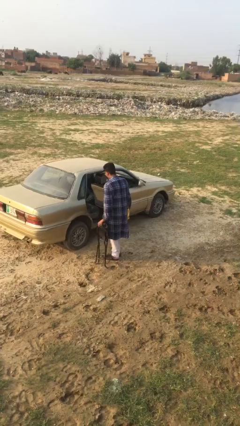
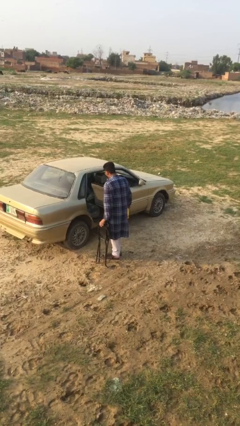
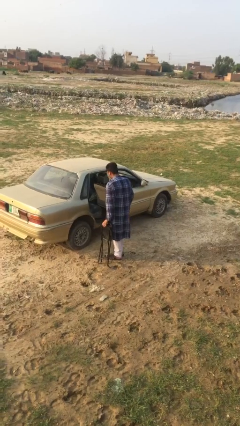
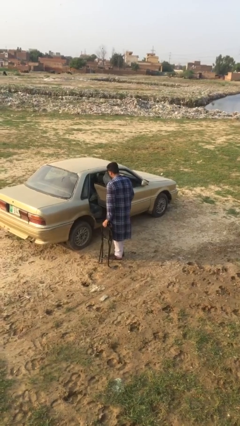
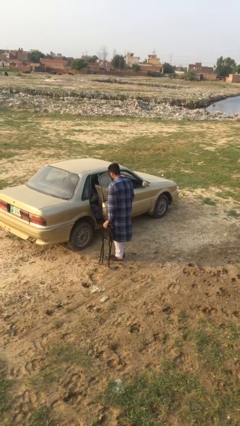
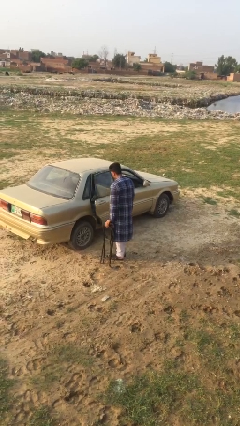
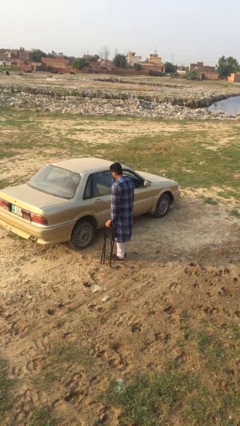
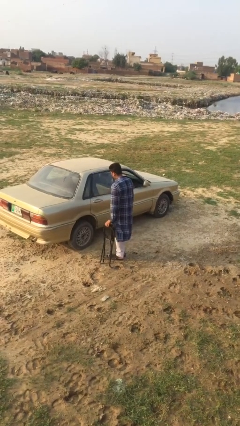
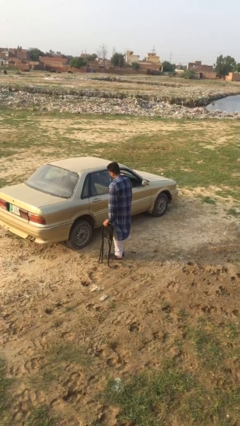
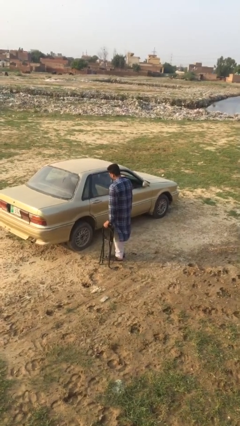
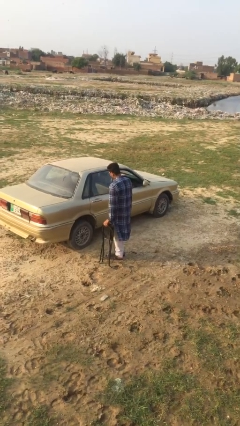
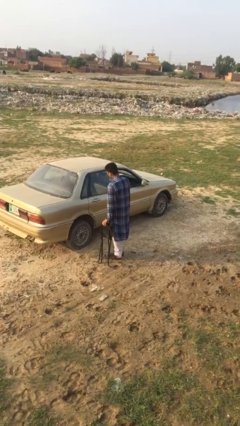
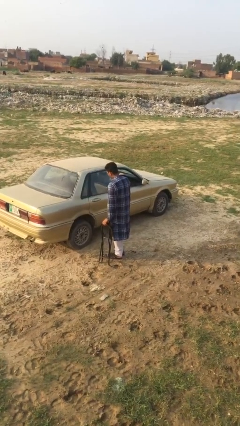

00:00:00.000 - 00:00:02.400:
person closes car door

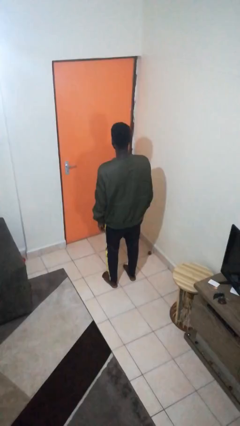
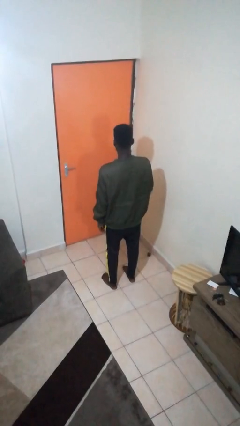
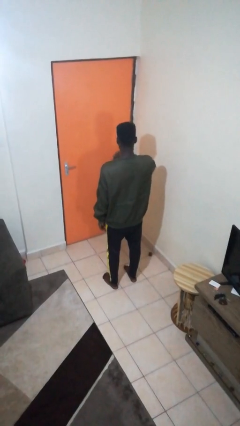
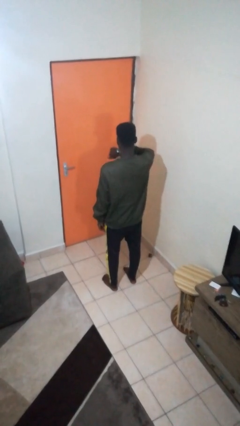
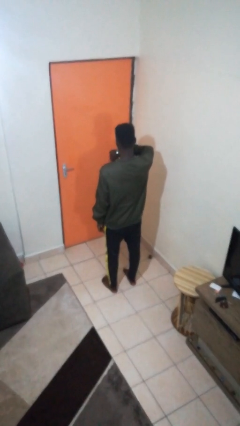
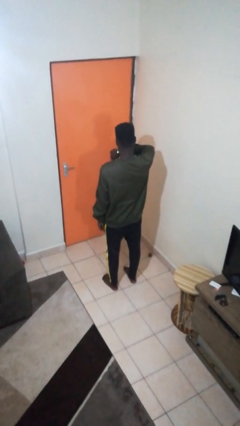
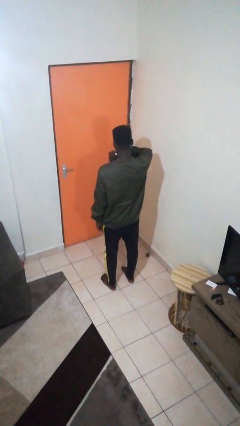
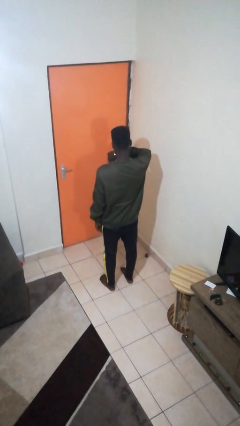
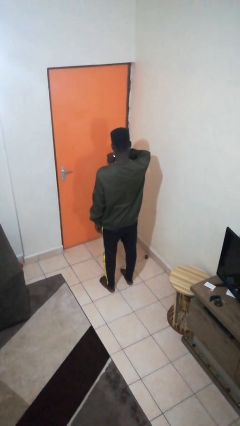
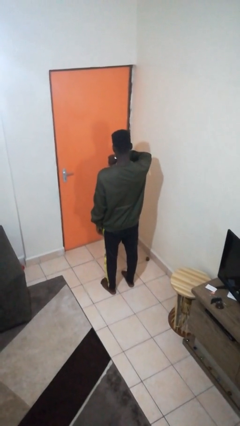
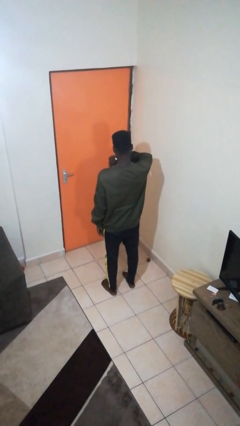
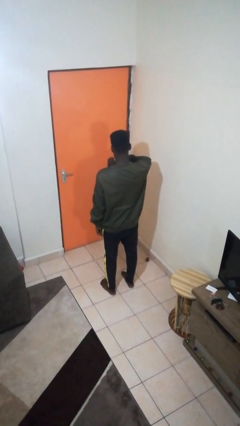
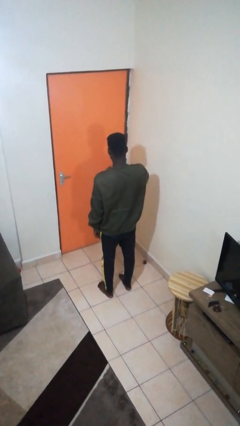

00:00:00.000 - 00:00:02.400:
person looks at wristwatch

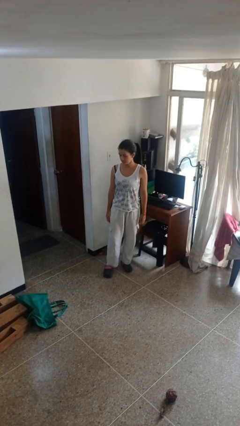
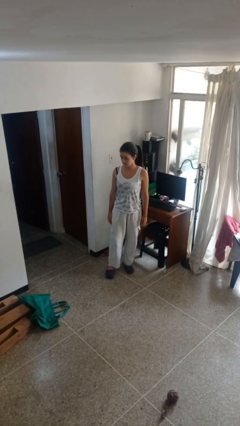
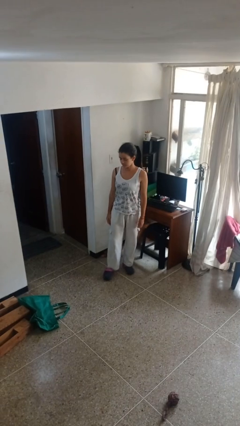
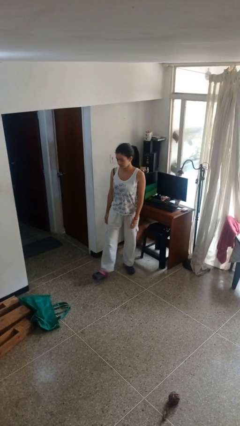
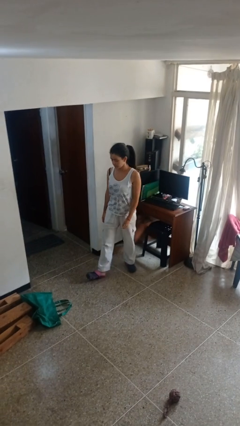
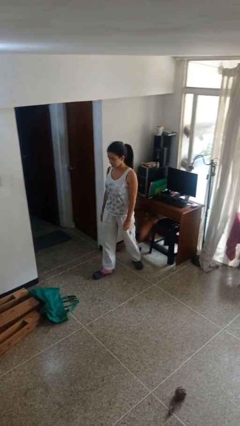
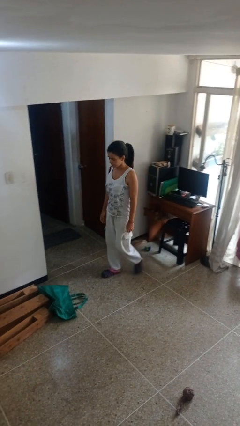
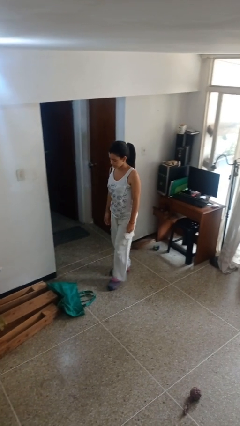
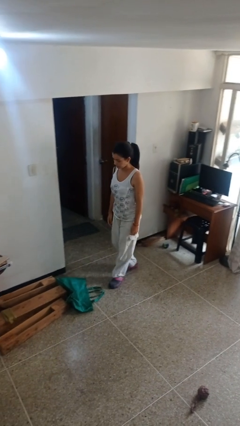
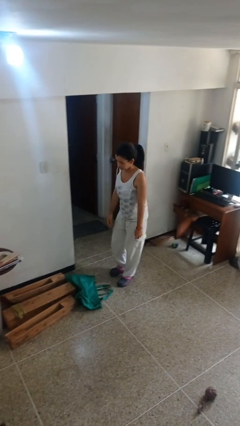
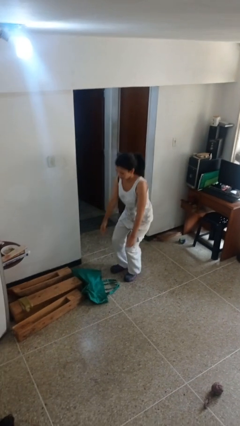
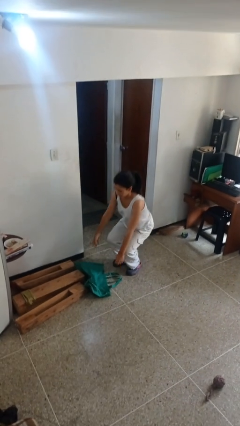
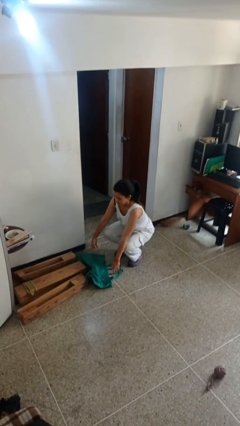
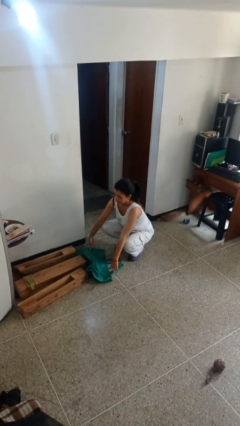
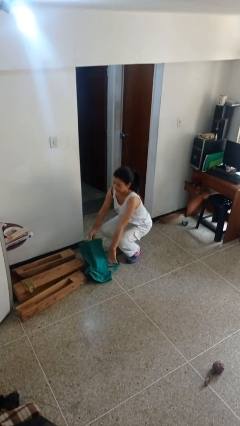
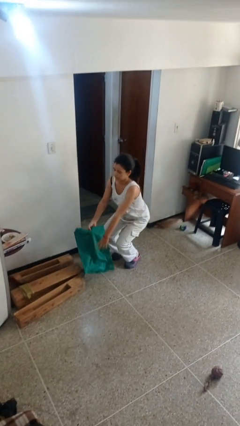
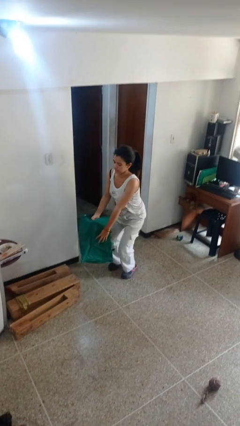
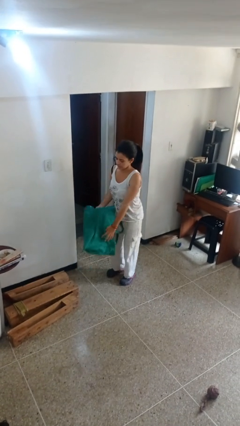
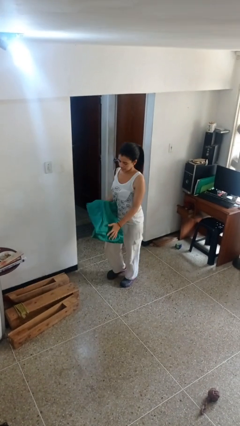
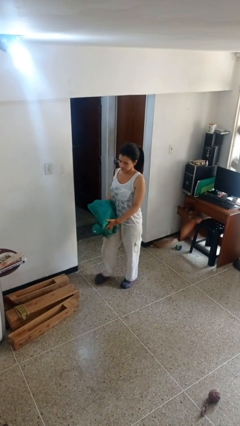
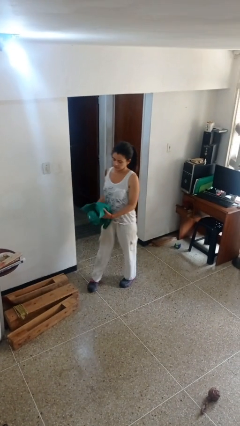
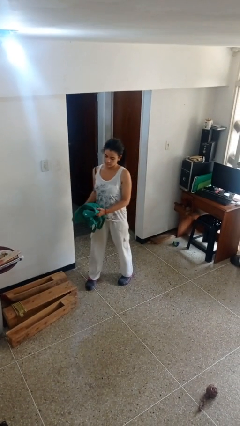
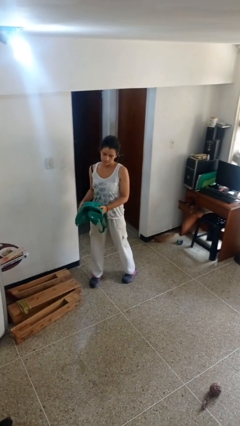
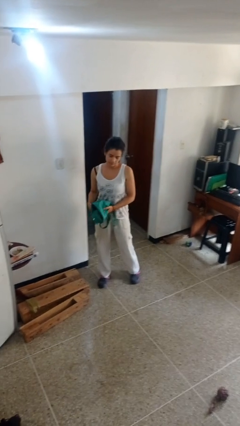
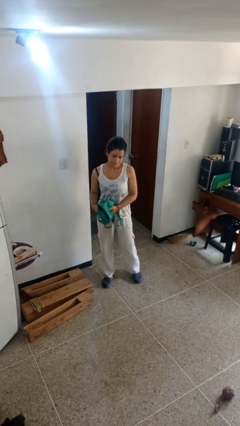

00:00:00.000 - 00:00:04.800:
person picks up object from floor

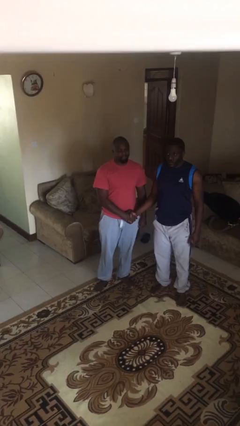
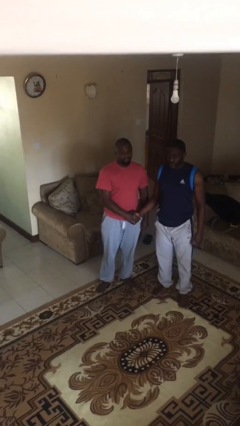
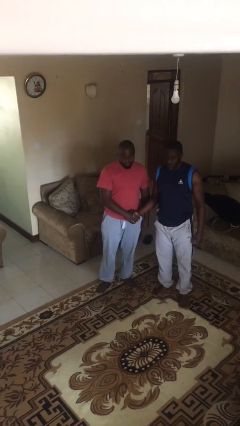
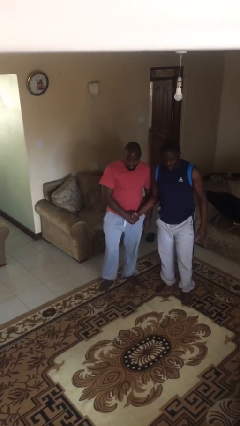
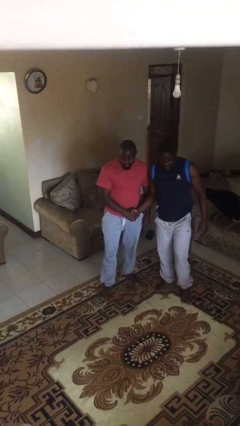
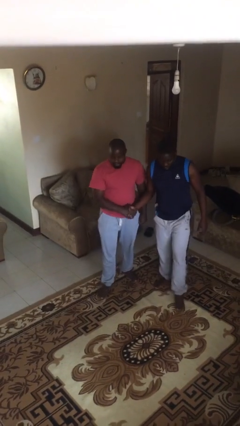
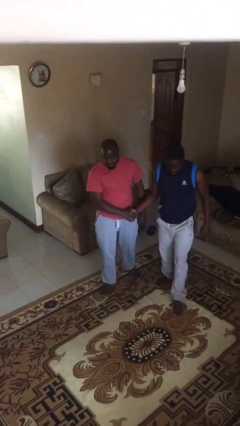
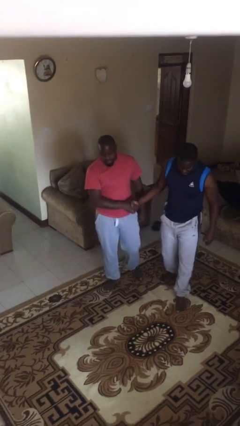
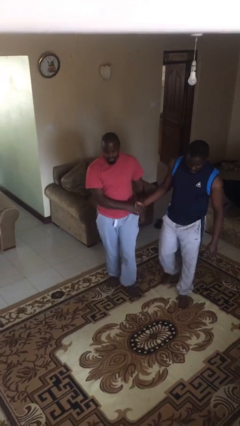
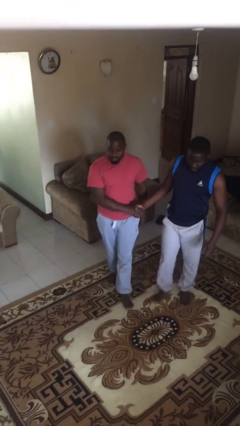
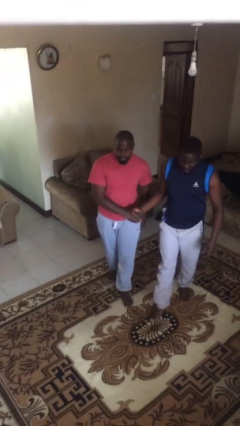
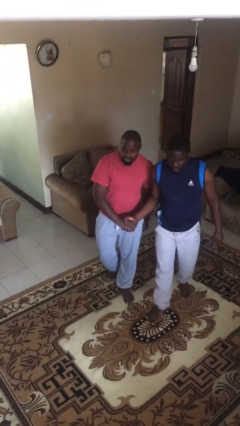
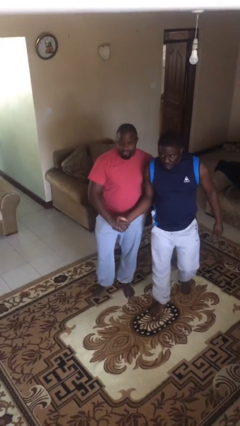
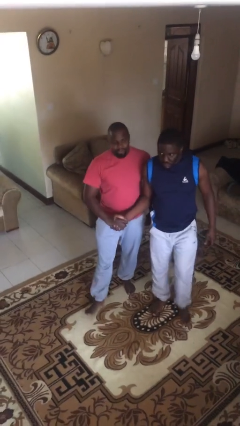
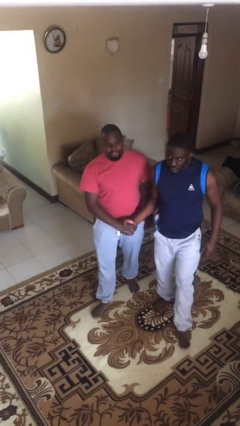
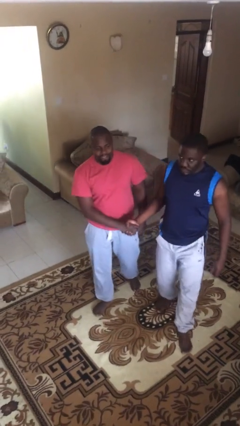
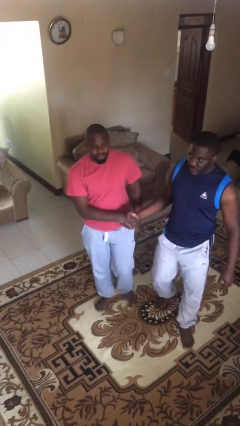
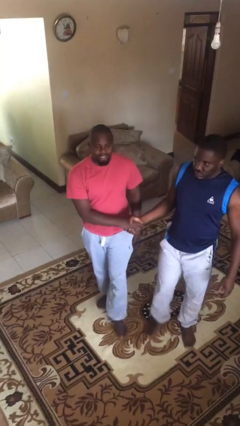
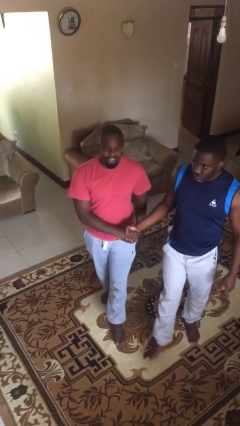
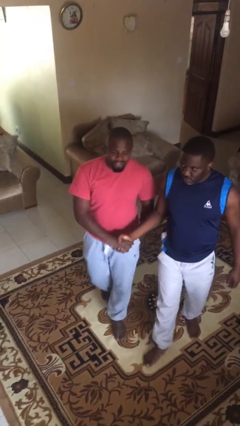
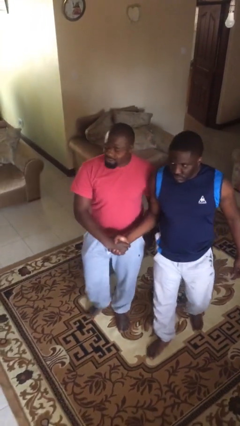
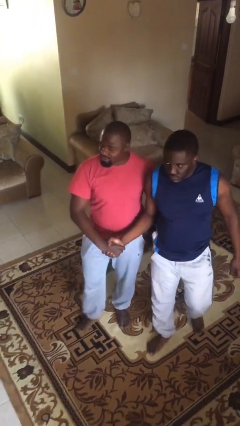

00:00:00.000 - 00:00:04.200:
person holds hand

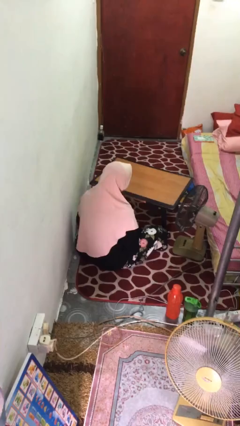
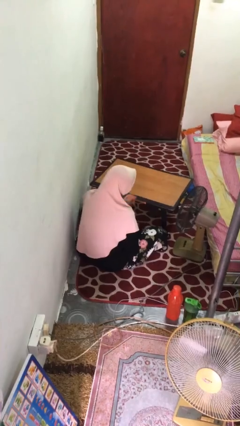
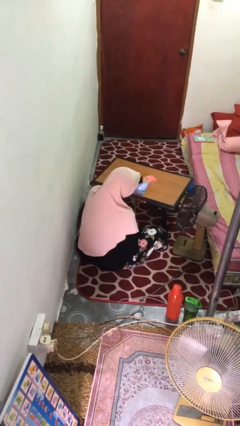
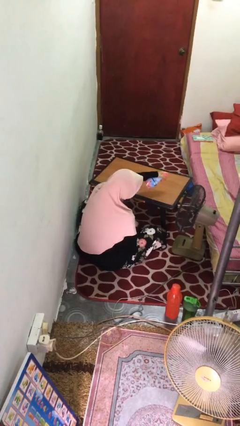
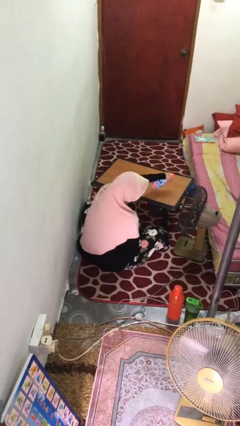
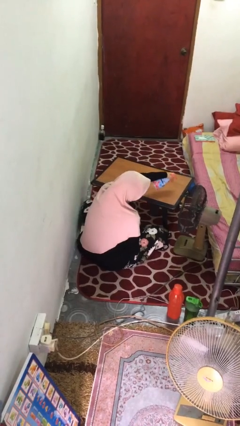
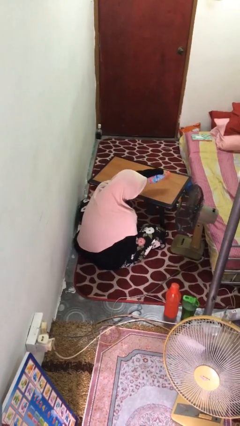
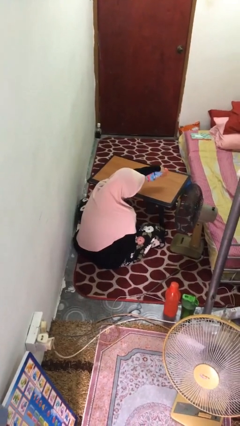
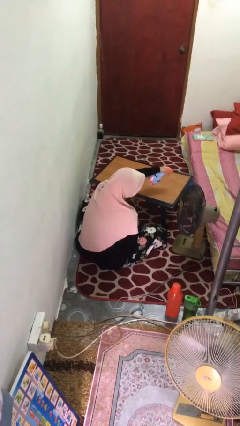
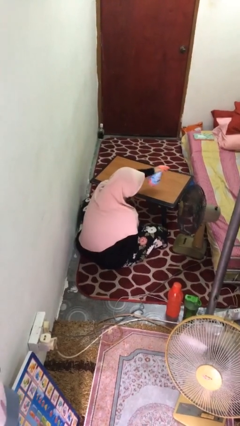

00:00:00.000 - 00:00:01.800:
person sprays from bottle

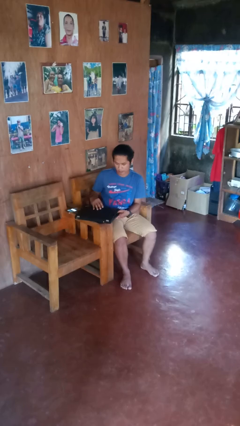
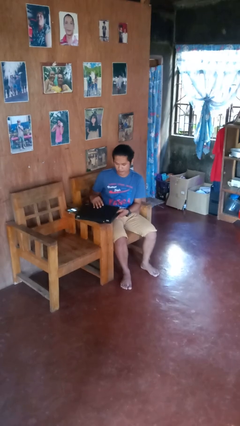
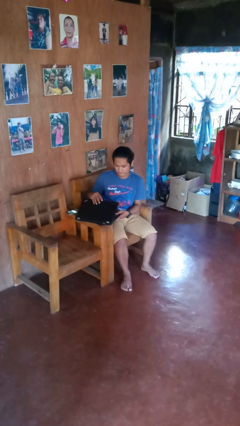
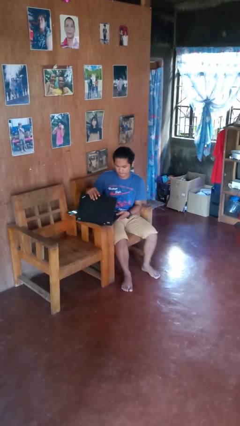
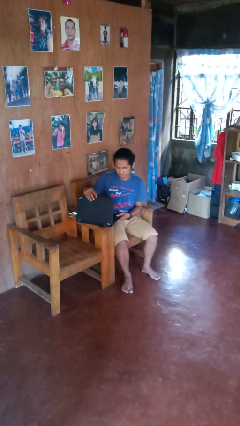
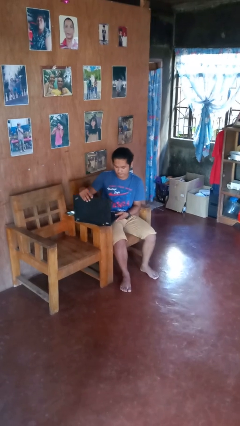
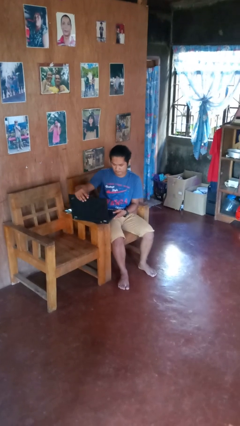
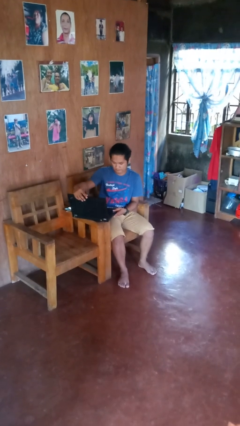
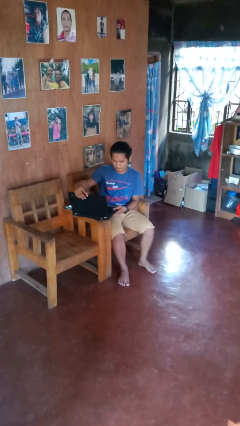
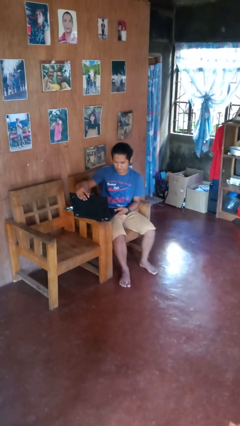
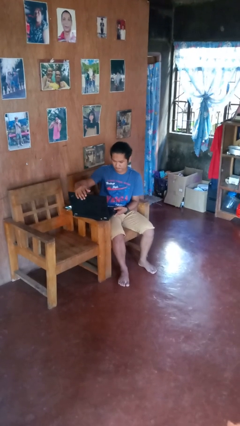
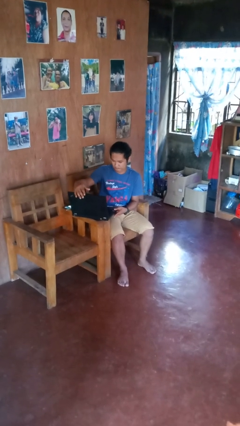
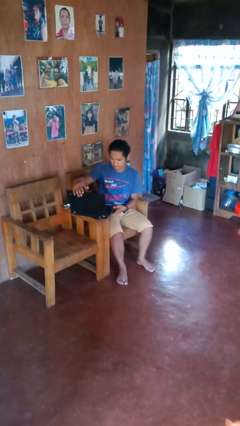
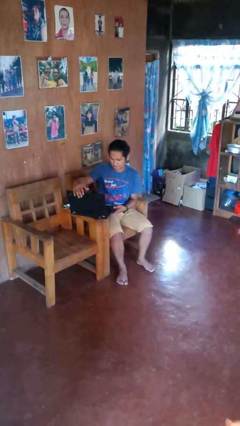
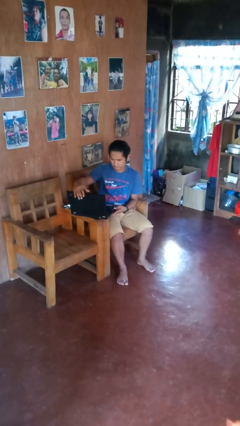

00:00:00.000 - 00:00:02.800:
person opens laptop
